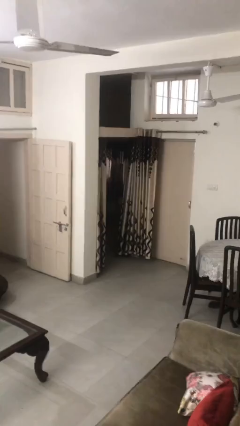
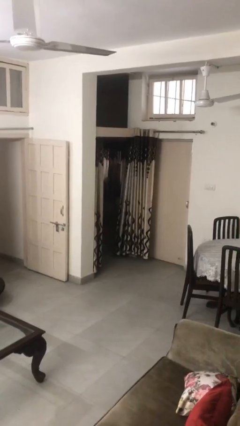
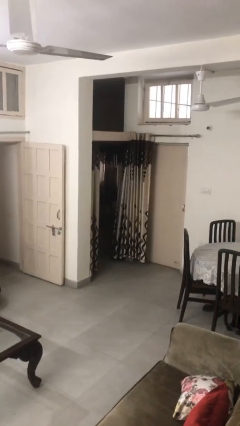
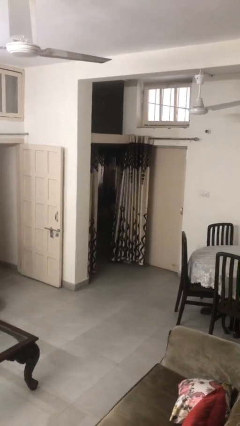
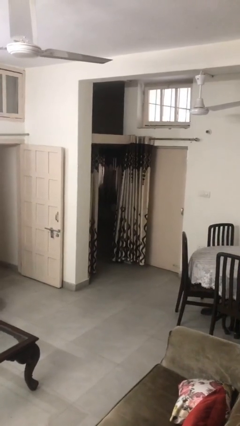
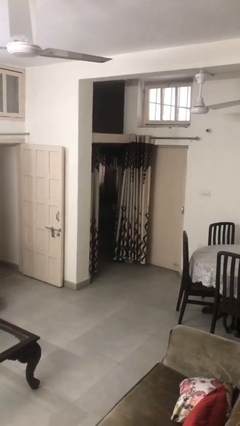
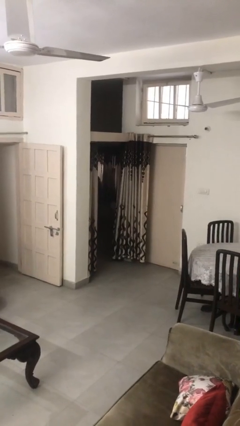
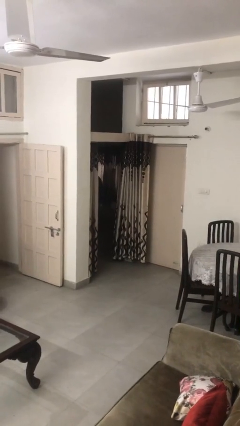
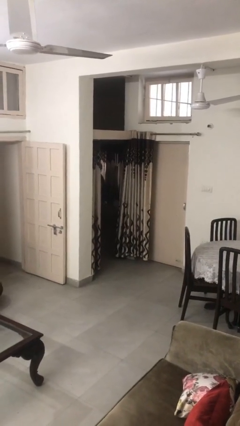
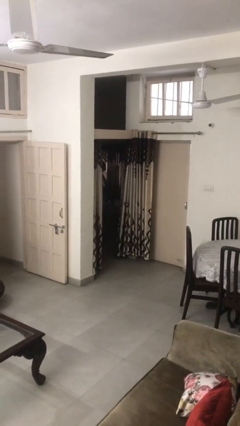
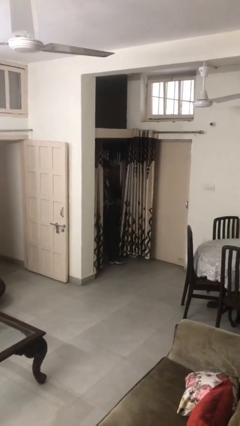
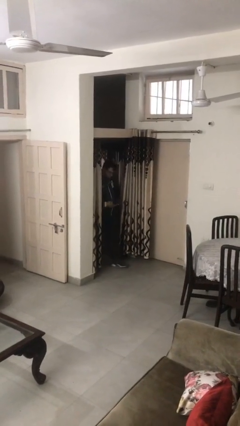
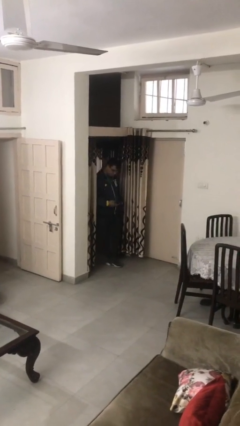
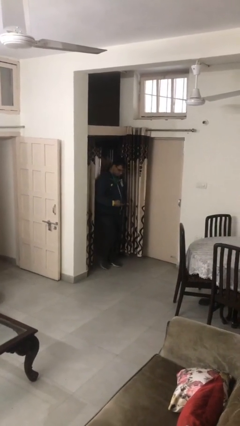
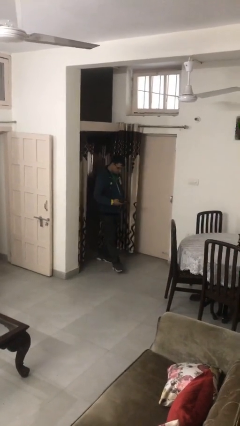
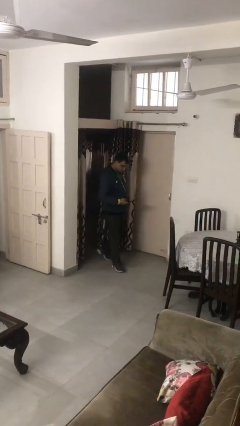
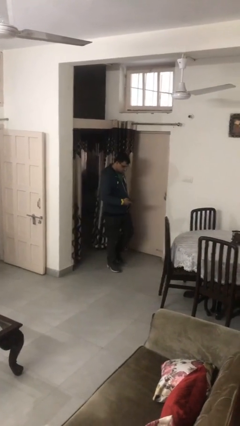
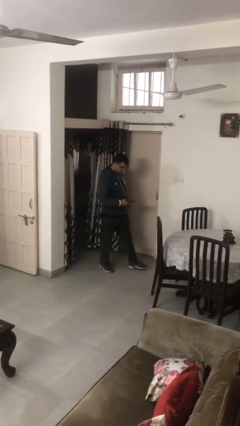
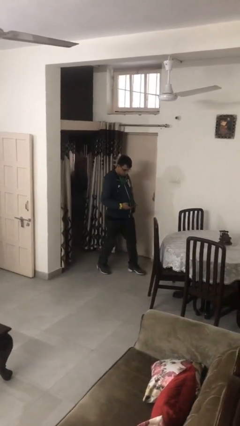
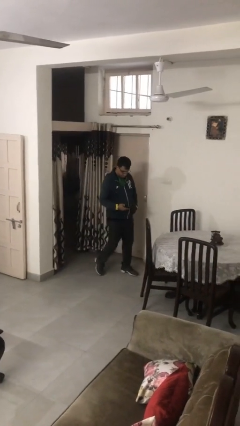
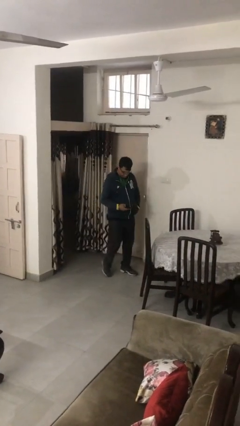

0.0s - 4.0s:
person enters scene through structure

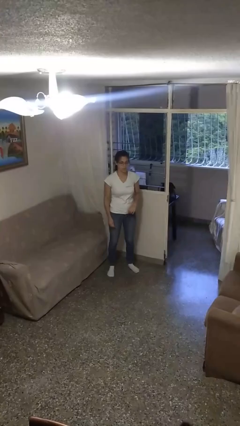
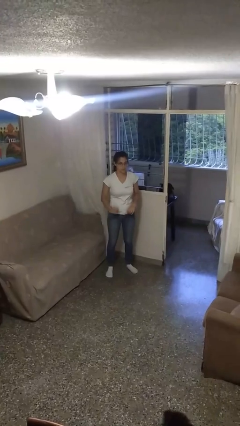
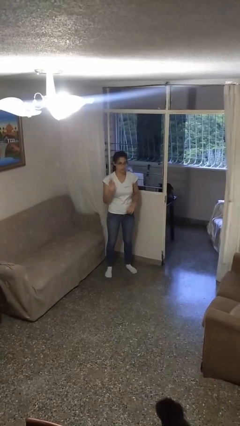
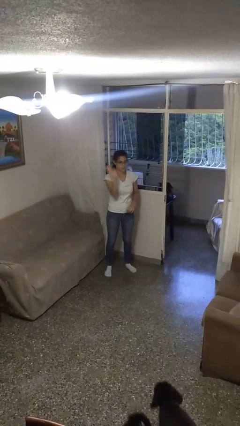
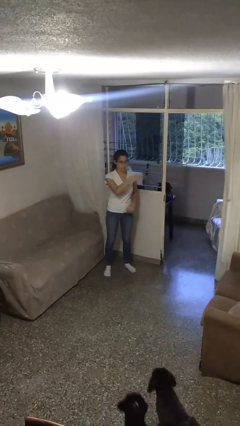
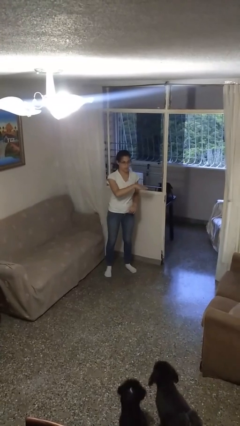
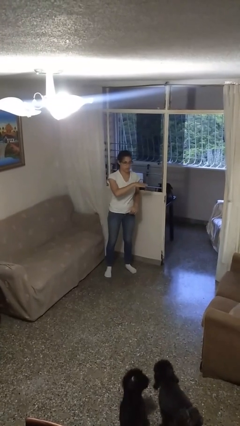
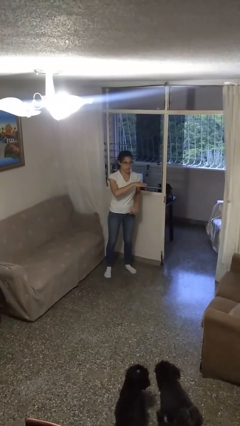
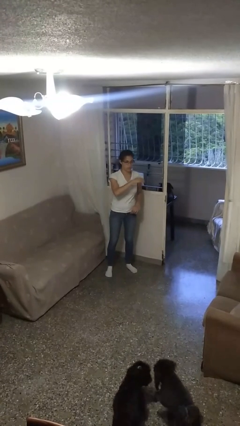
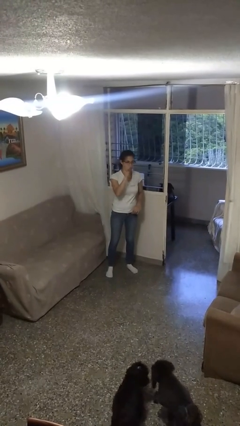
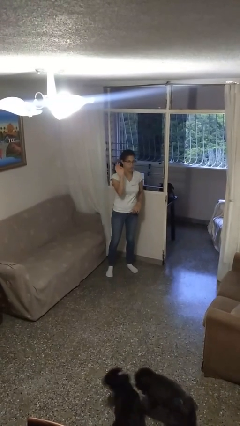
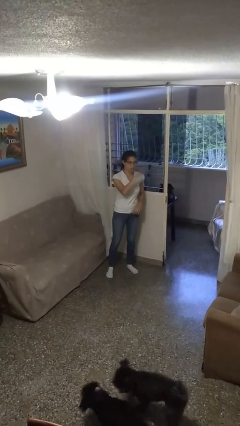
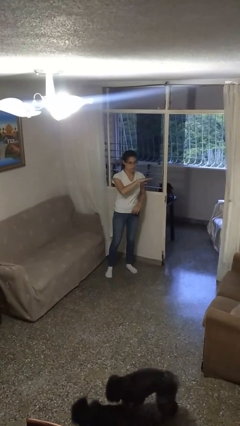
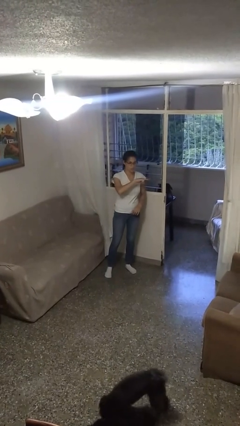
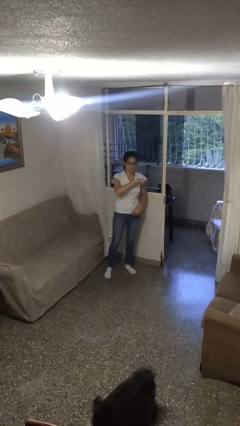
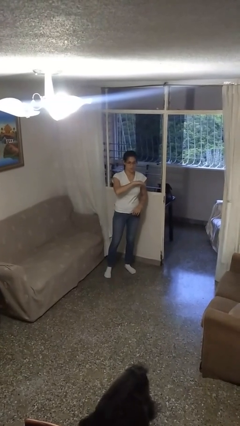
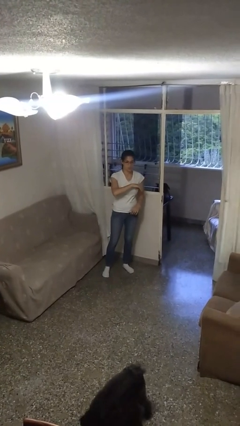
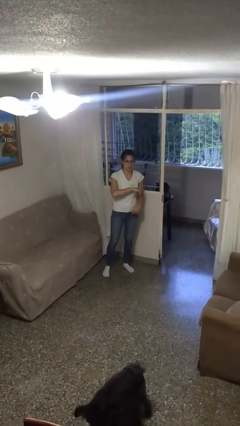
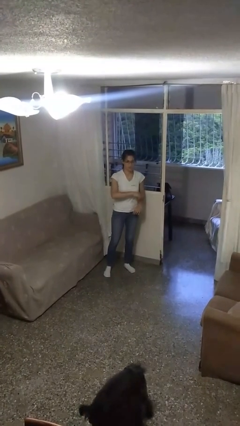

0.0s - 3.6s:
person gestures swipe left

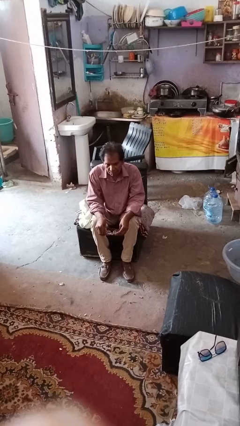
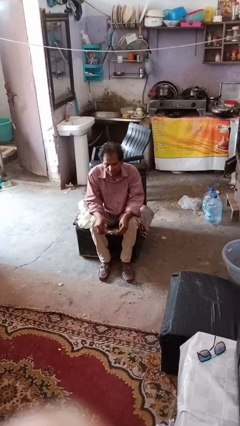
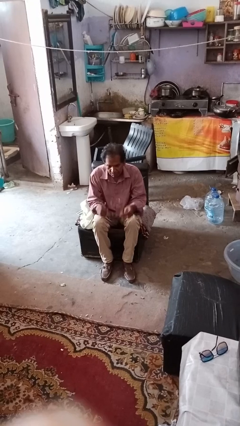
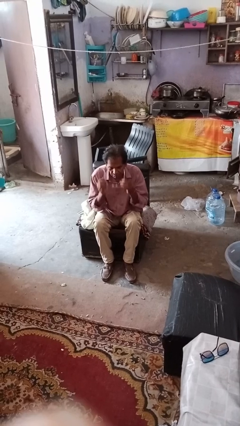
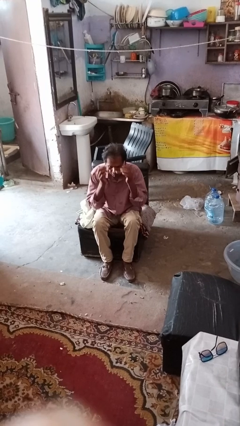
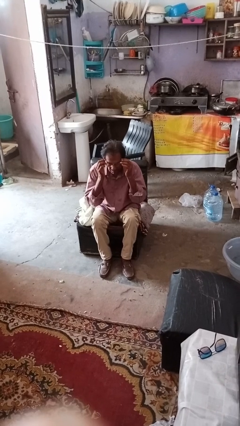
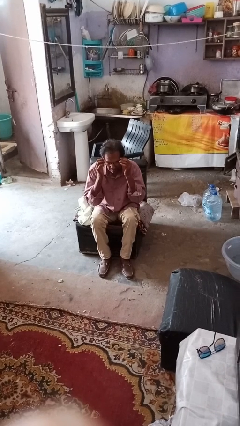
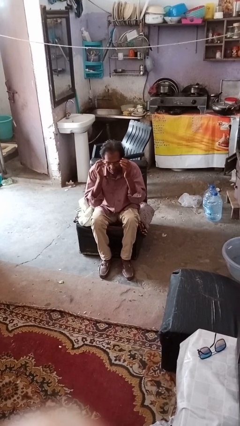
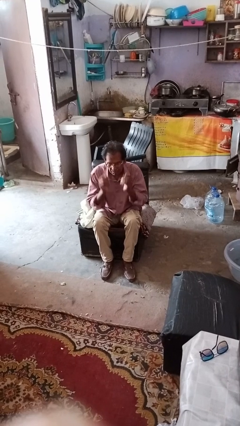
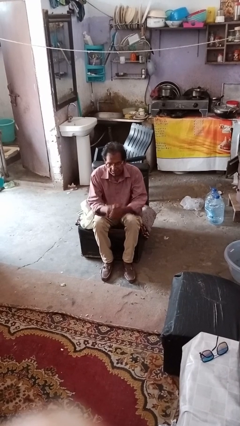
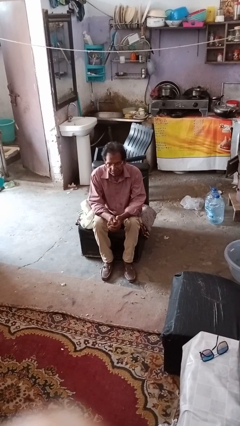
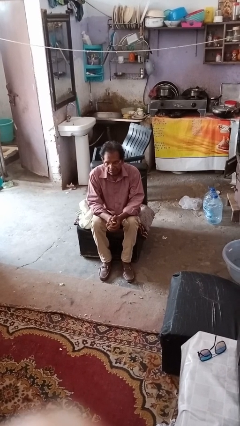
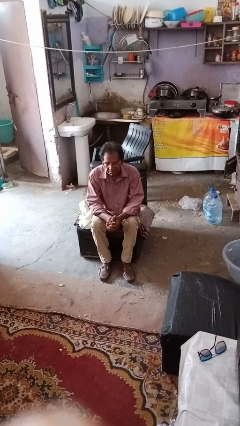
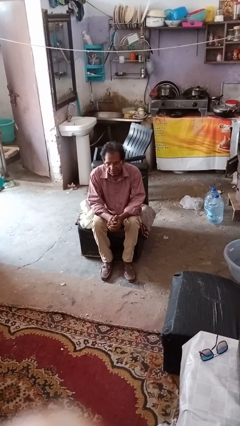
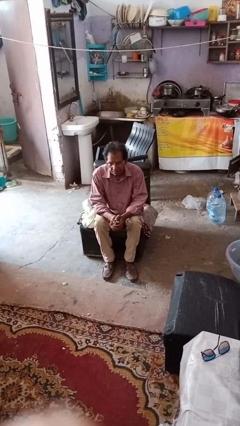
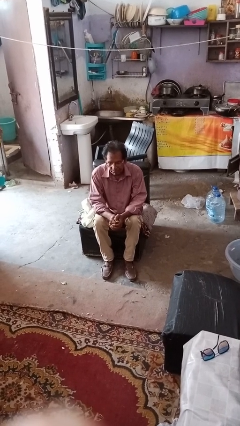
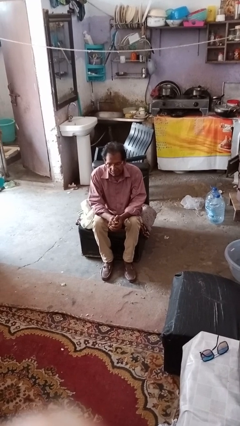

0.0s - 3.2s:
person puts on glasses

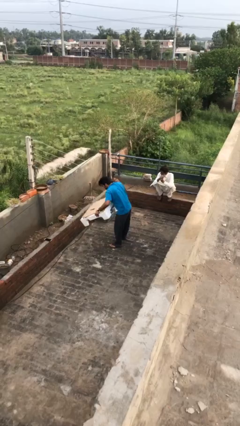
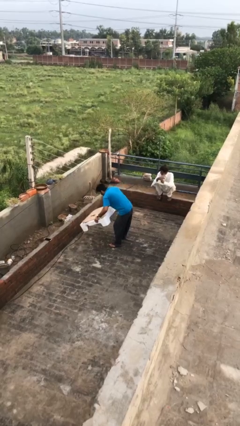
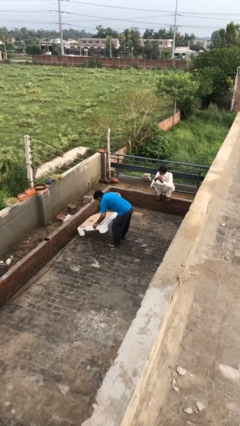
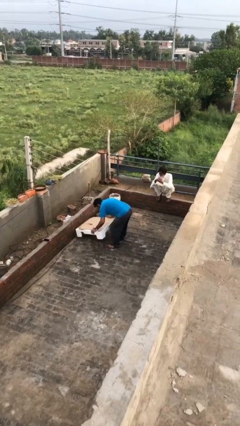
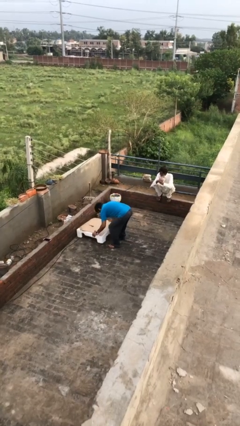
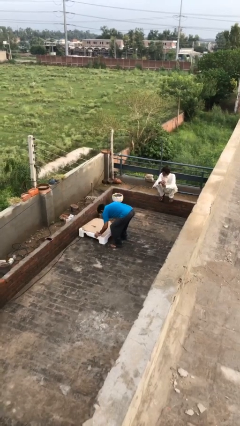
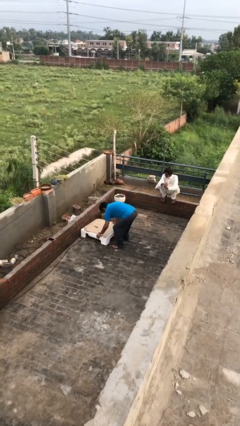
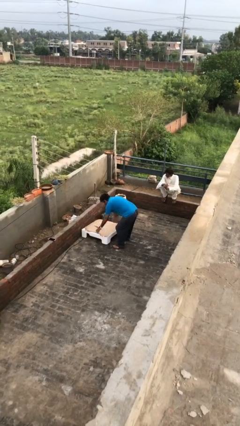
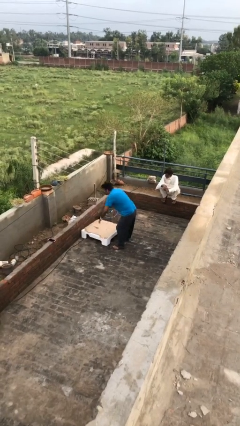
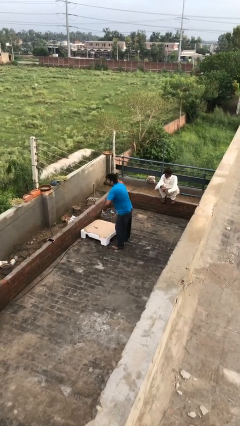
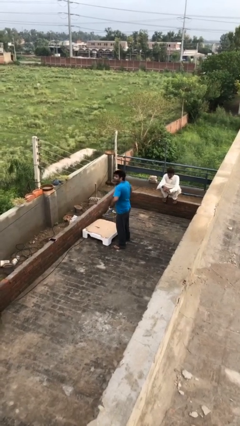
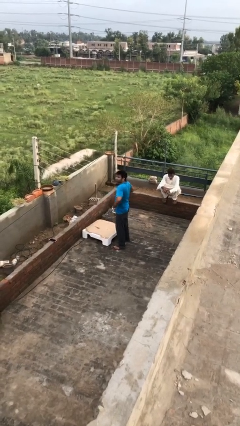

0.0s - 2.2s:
person puts down object on floor

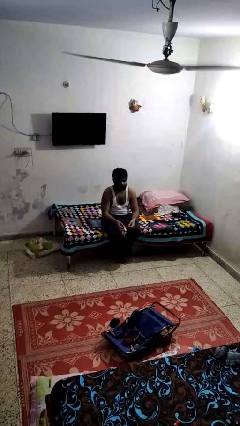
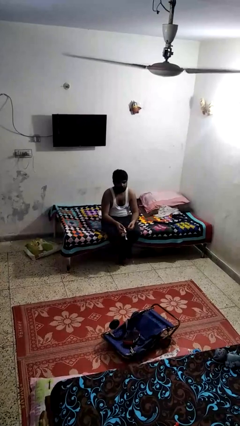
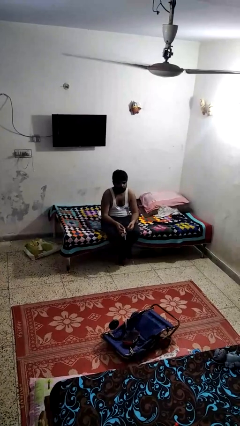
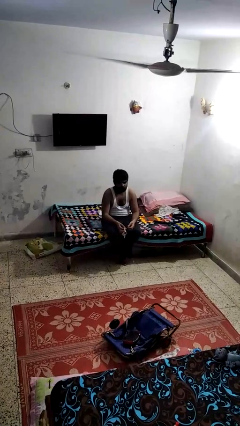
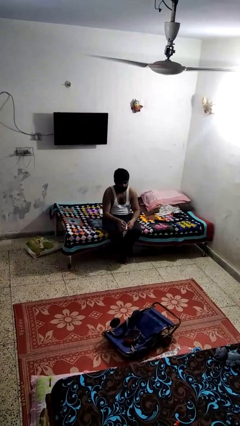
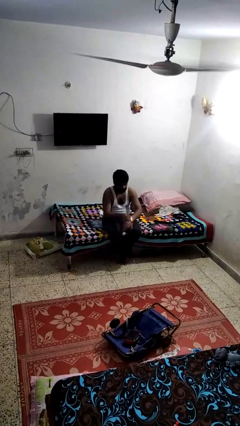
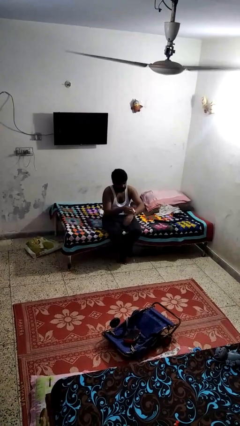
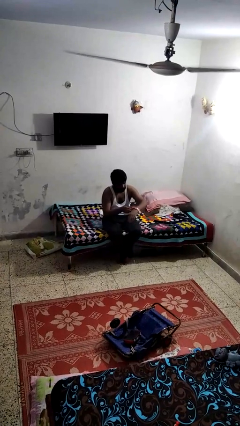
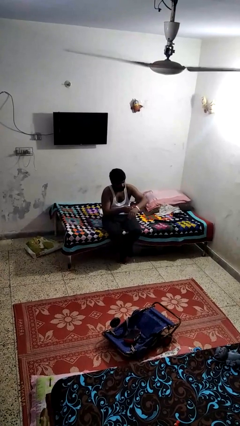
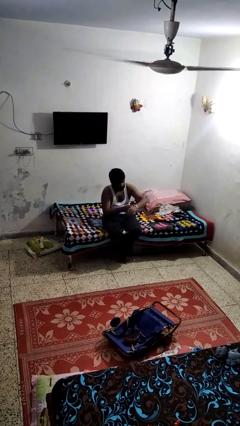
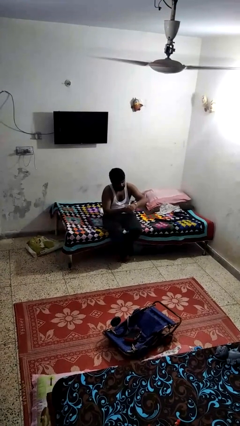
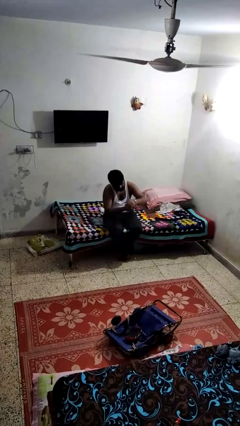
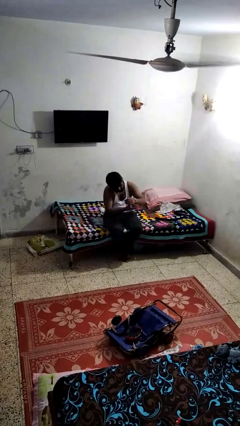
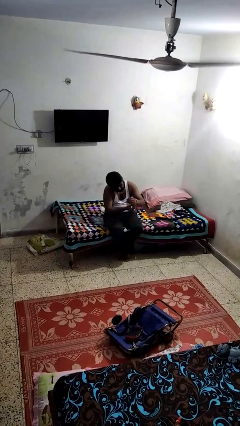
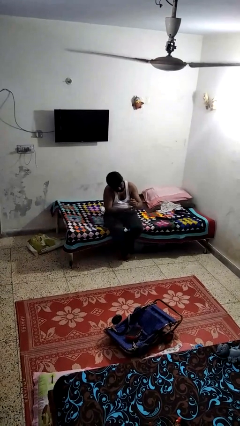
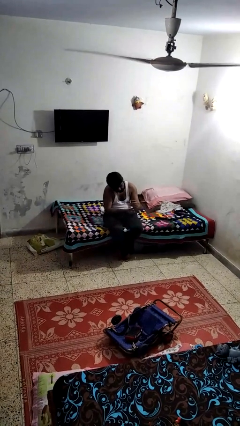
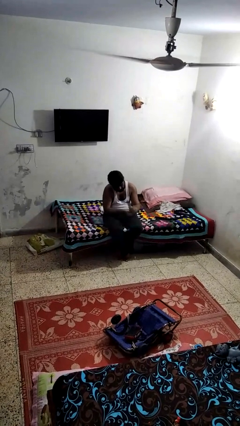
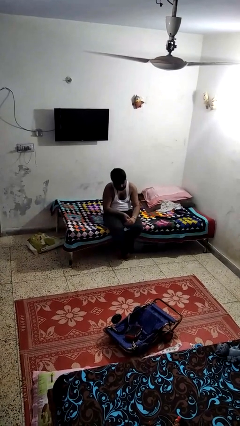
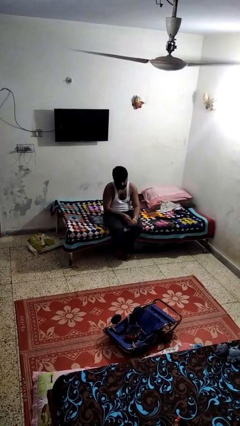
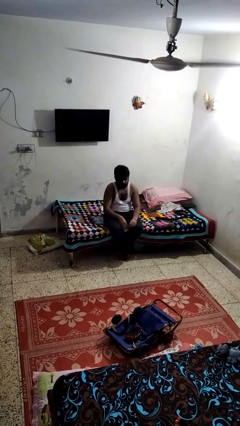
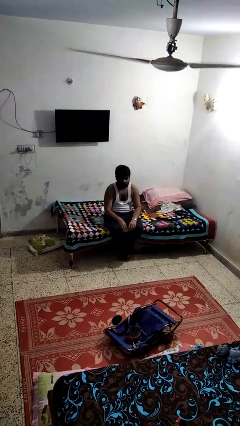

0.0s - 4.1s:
person puts on wristwatch

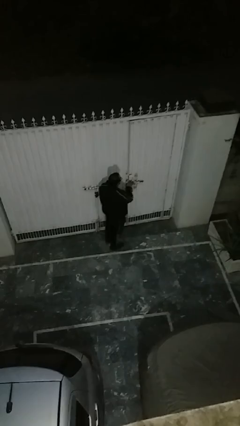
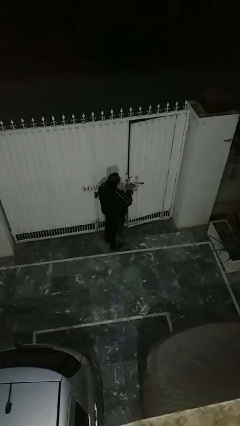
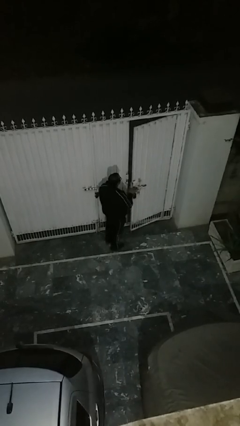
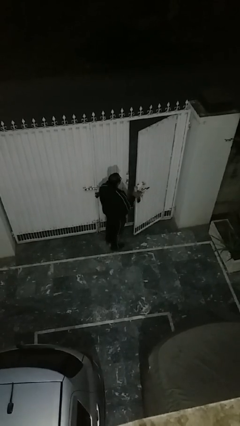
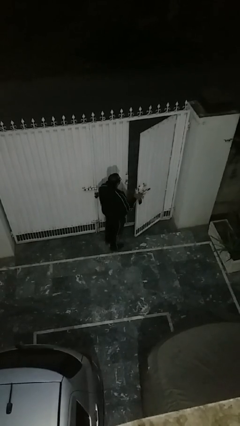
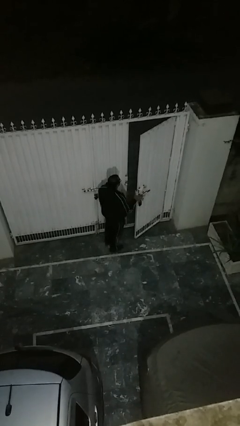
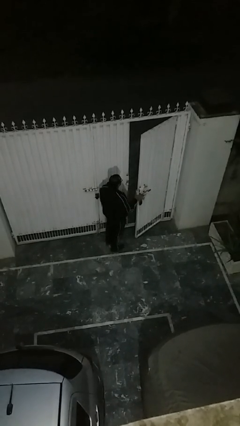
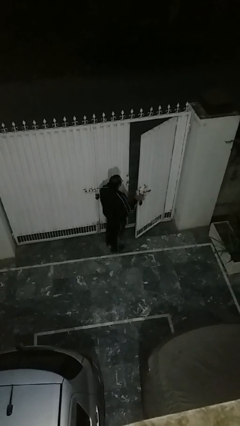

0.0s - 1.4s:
person opens facility door
